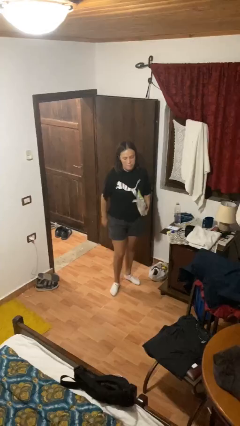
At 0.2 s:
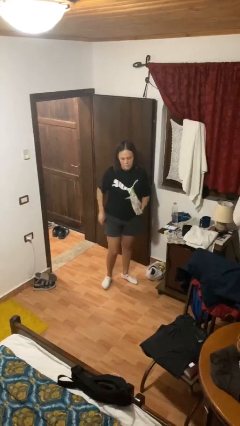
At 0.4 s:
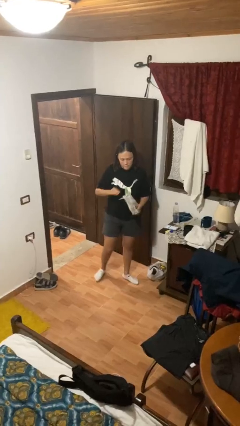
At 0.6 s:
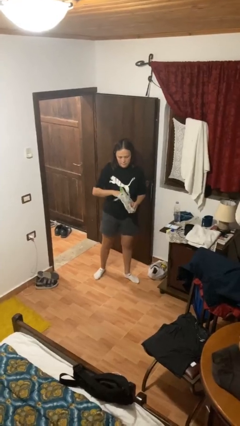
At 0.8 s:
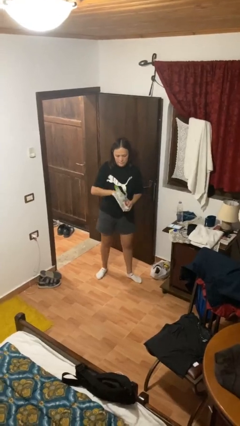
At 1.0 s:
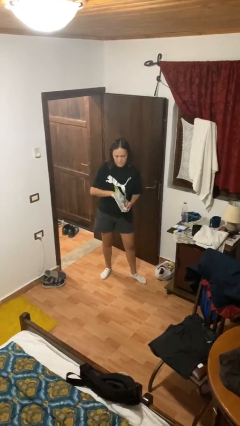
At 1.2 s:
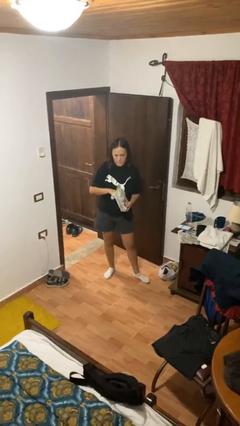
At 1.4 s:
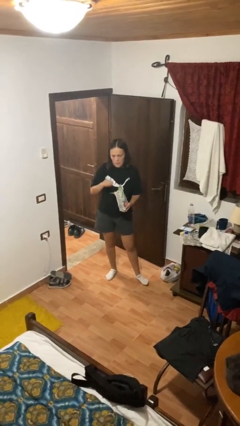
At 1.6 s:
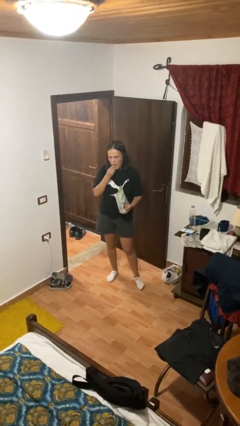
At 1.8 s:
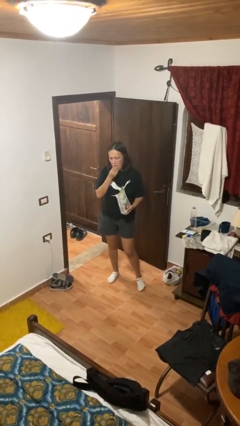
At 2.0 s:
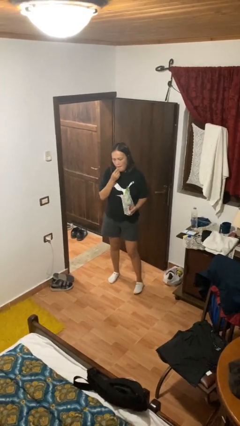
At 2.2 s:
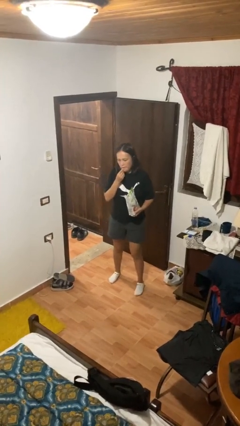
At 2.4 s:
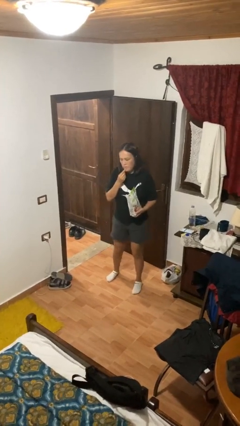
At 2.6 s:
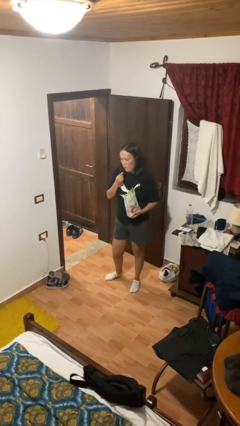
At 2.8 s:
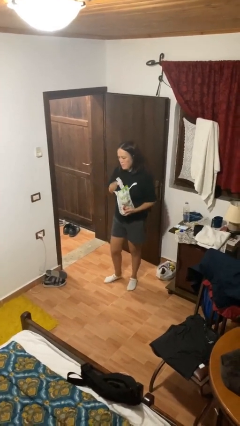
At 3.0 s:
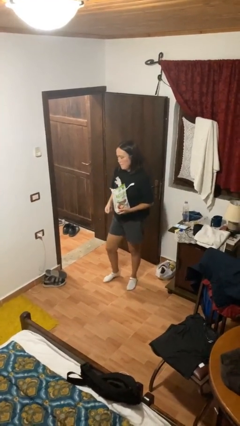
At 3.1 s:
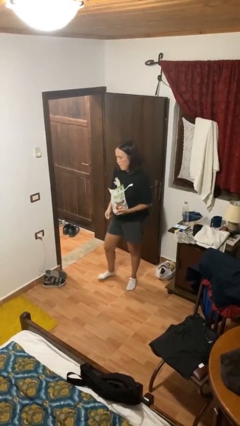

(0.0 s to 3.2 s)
person eats snack from bag

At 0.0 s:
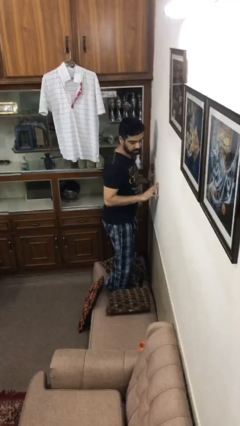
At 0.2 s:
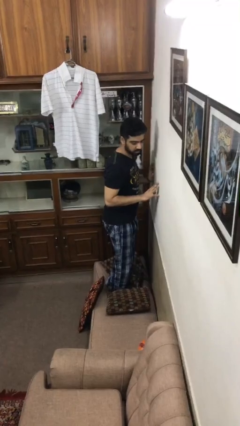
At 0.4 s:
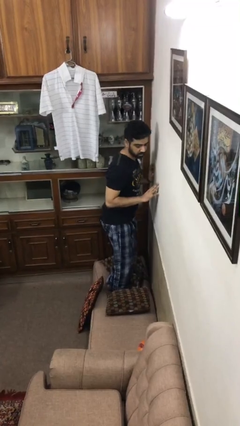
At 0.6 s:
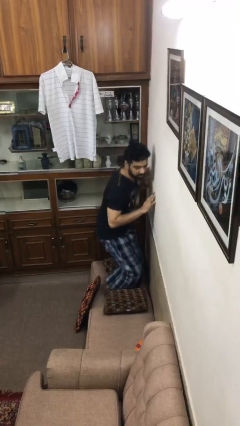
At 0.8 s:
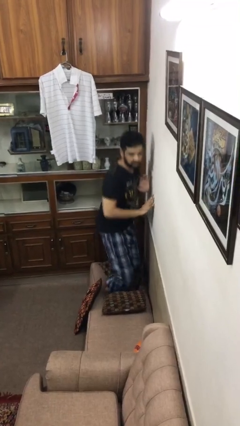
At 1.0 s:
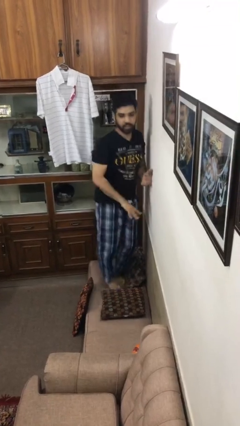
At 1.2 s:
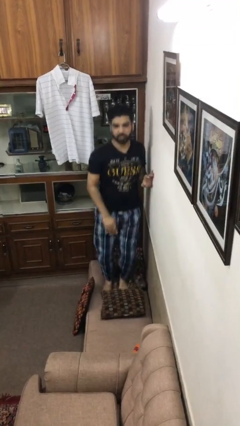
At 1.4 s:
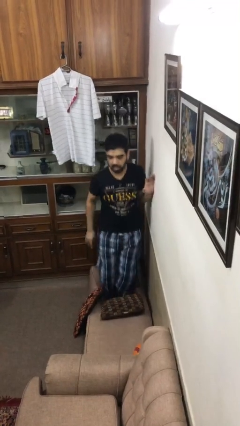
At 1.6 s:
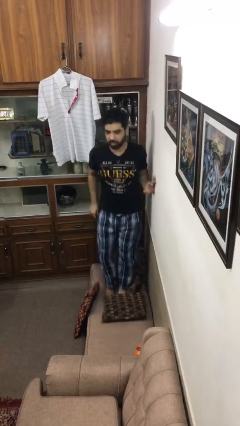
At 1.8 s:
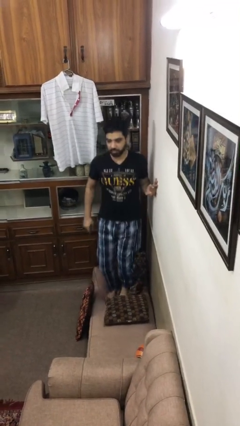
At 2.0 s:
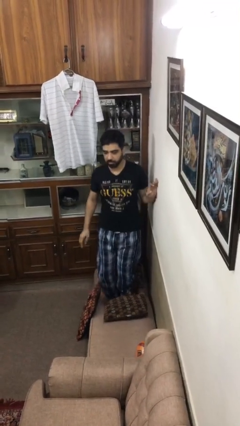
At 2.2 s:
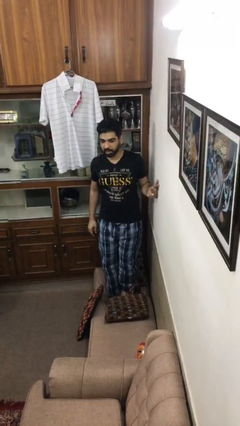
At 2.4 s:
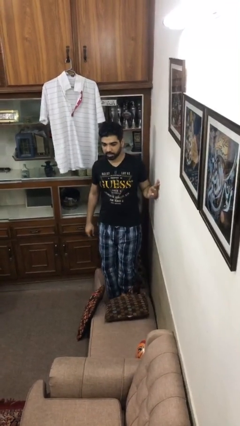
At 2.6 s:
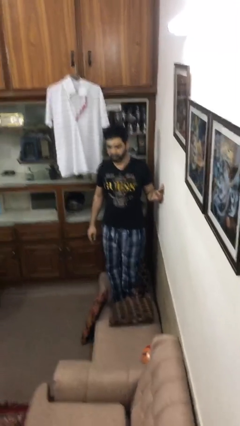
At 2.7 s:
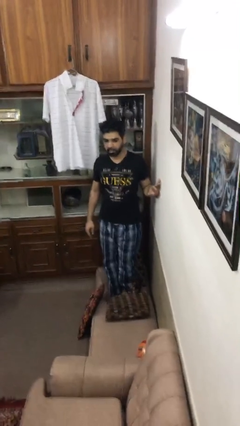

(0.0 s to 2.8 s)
person jumps on couch

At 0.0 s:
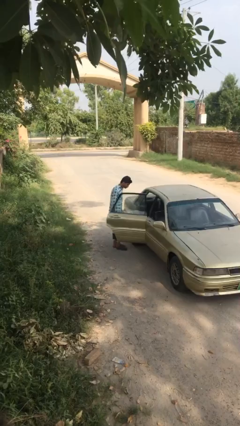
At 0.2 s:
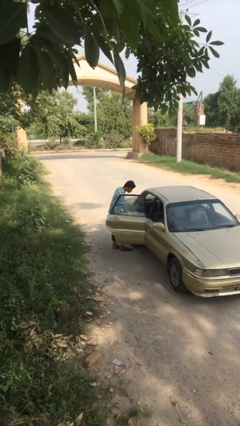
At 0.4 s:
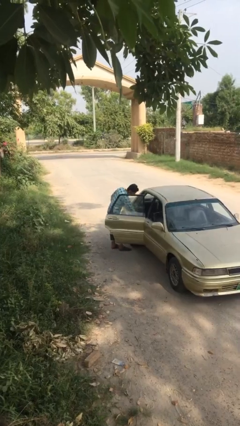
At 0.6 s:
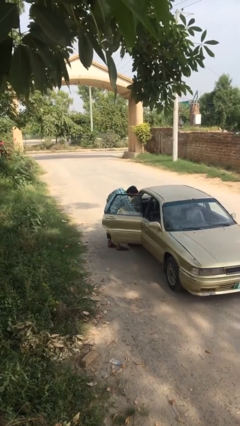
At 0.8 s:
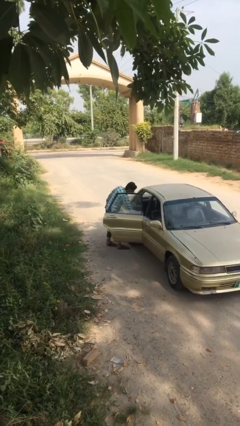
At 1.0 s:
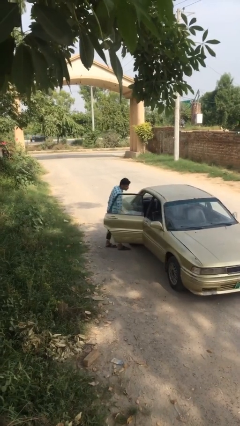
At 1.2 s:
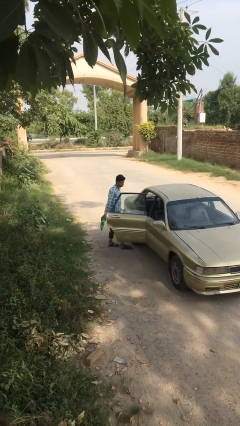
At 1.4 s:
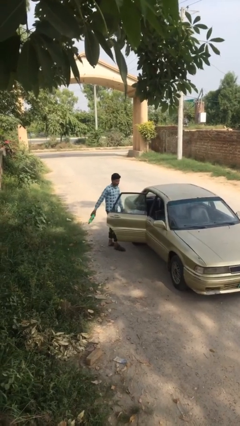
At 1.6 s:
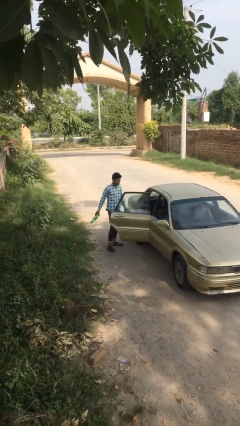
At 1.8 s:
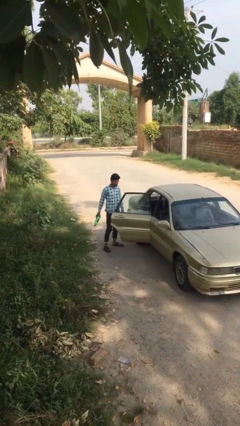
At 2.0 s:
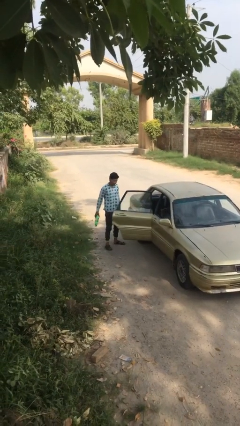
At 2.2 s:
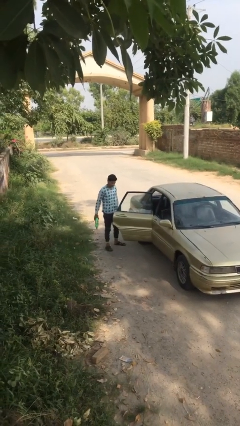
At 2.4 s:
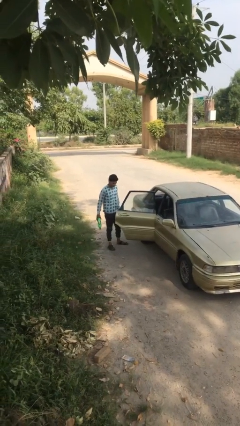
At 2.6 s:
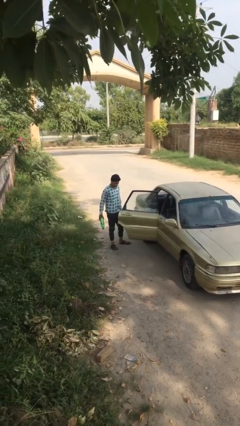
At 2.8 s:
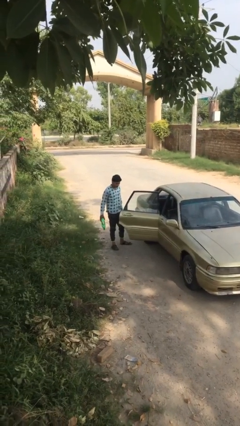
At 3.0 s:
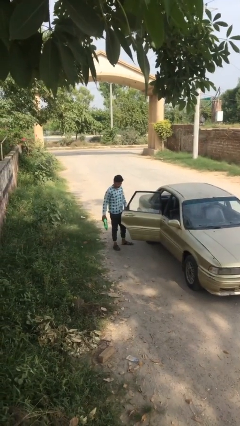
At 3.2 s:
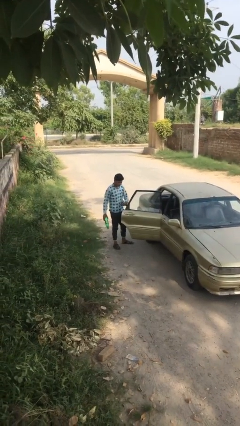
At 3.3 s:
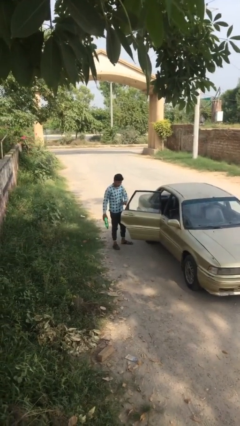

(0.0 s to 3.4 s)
person unloads car

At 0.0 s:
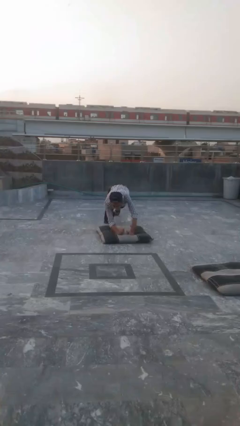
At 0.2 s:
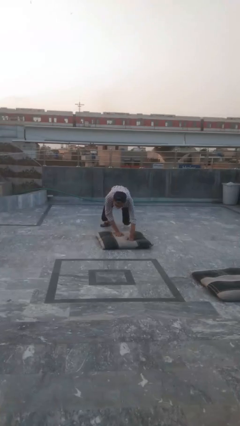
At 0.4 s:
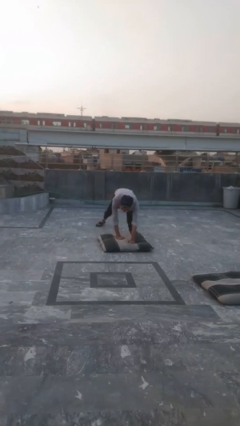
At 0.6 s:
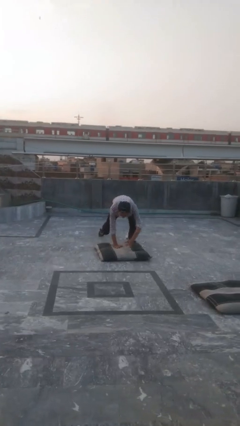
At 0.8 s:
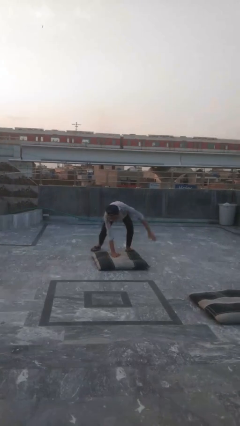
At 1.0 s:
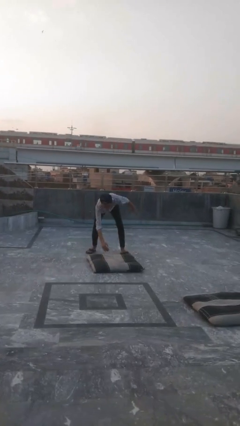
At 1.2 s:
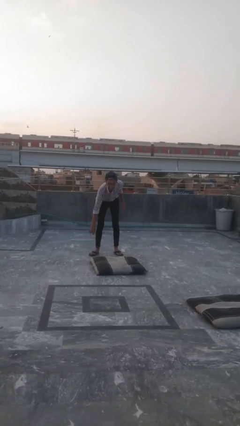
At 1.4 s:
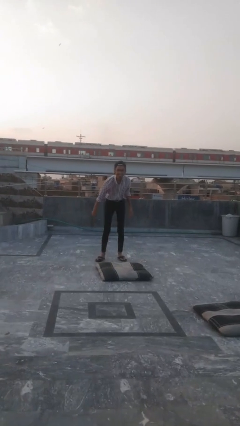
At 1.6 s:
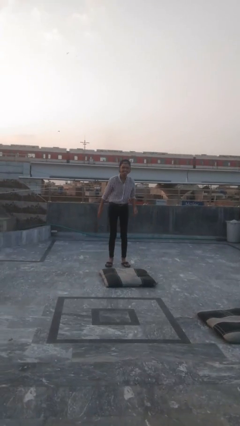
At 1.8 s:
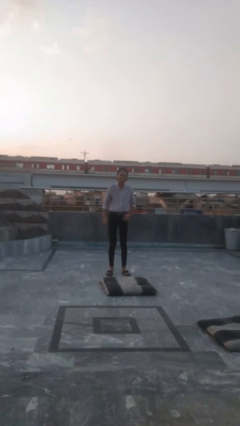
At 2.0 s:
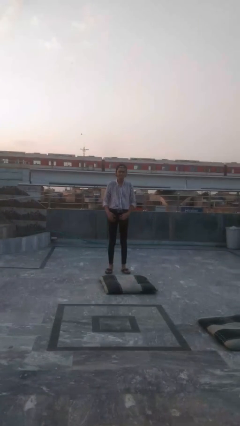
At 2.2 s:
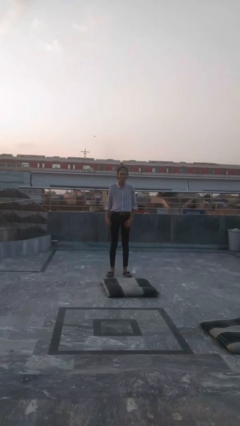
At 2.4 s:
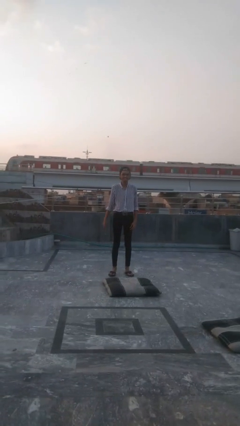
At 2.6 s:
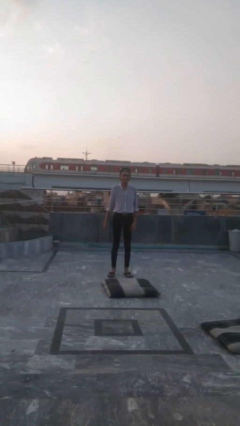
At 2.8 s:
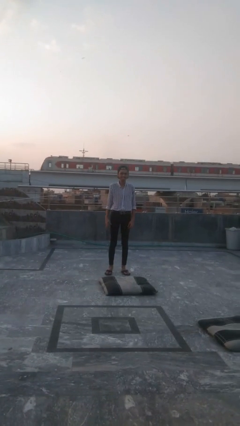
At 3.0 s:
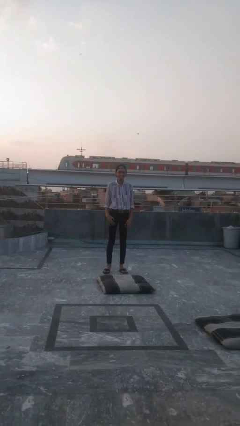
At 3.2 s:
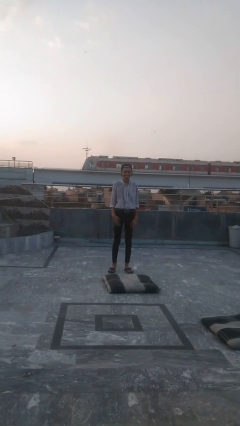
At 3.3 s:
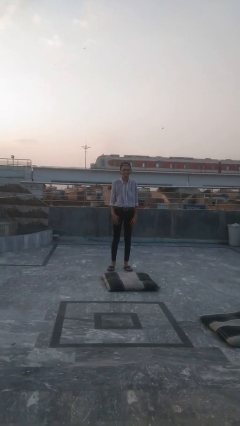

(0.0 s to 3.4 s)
person stands up from floor

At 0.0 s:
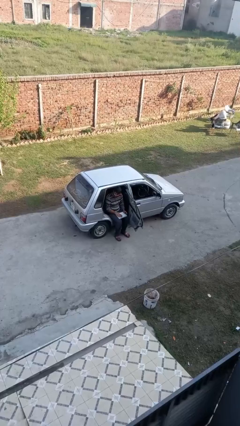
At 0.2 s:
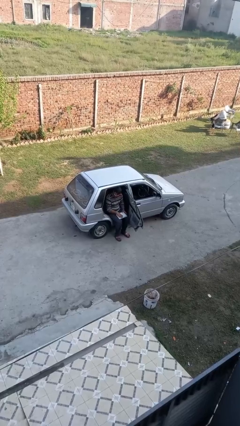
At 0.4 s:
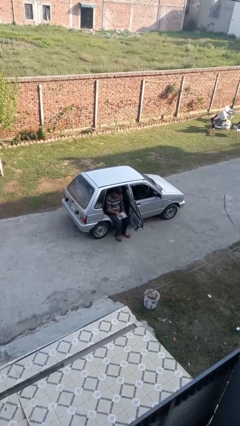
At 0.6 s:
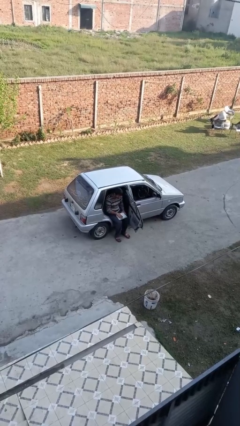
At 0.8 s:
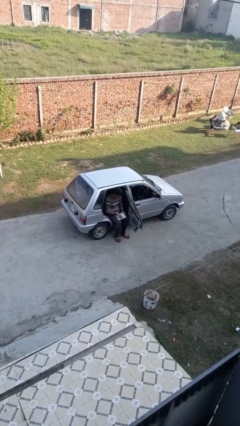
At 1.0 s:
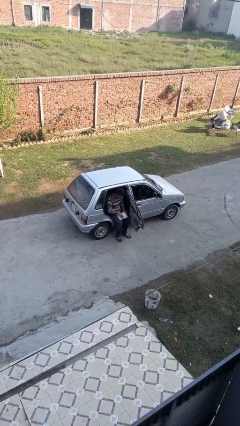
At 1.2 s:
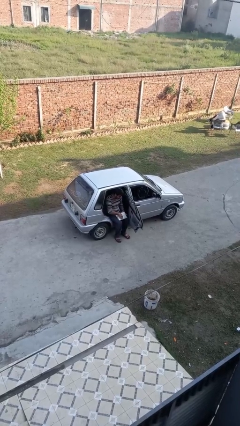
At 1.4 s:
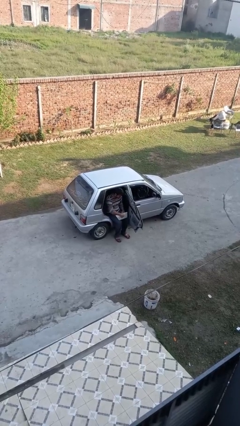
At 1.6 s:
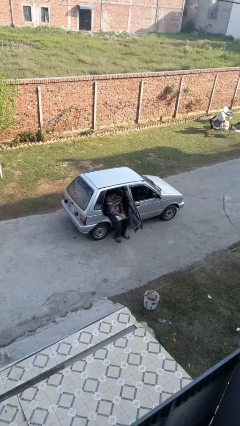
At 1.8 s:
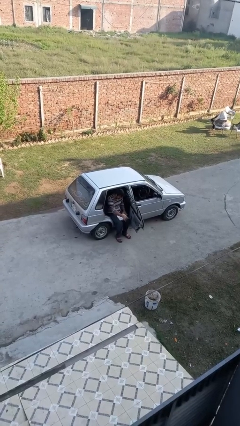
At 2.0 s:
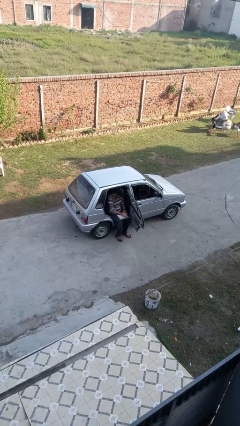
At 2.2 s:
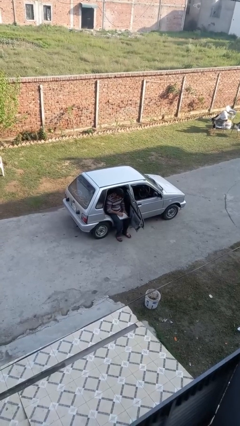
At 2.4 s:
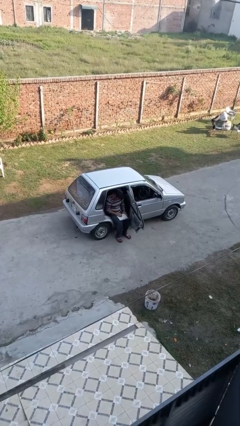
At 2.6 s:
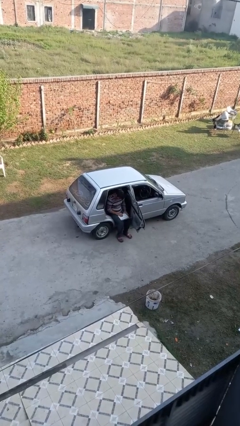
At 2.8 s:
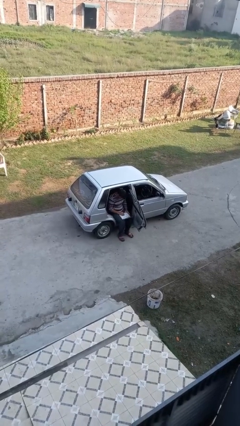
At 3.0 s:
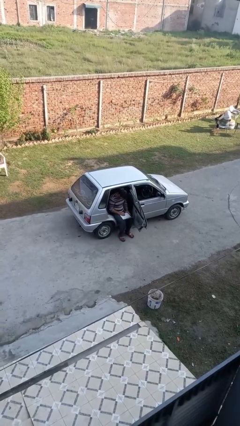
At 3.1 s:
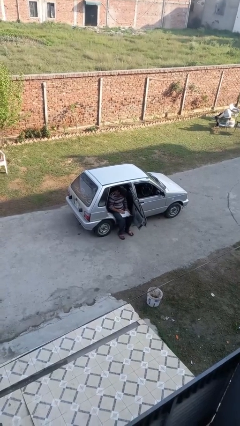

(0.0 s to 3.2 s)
person interacts with laptop

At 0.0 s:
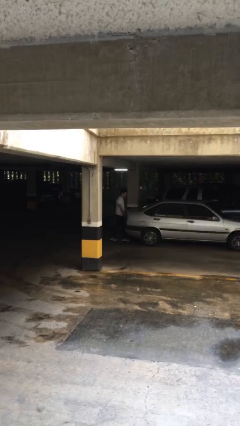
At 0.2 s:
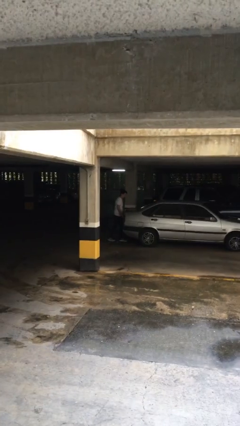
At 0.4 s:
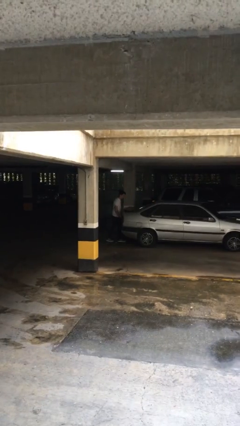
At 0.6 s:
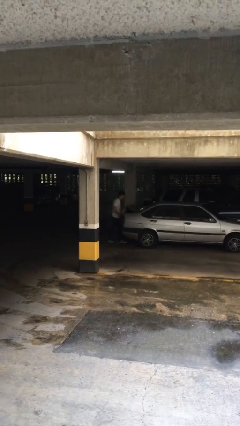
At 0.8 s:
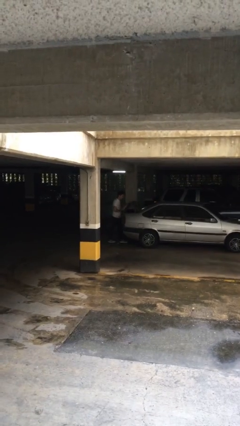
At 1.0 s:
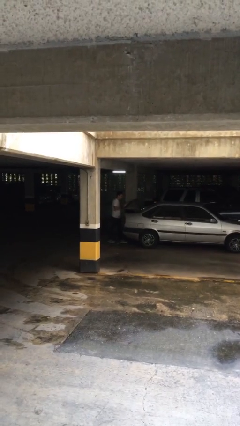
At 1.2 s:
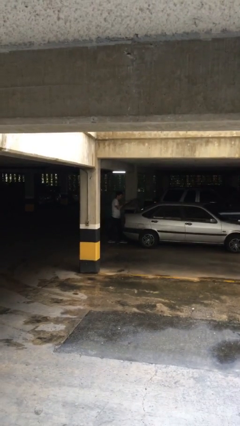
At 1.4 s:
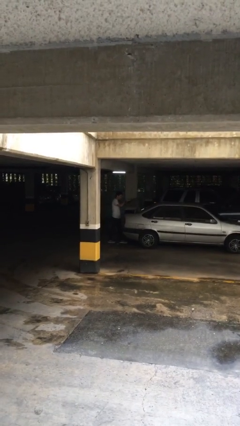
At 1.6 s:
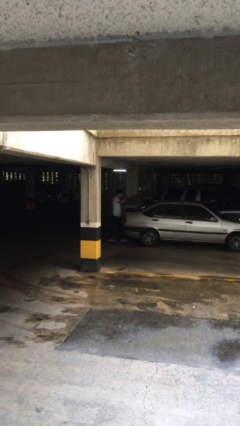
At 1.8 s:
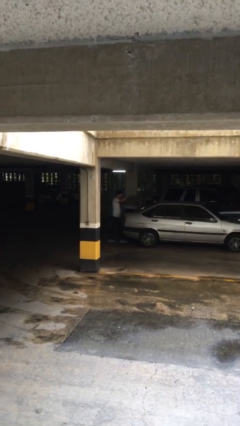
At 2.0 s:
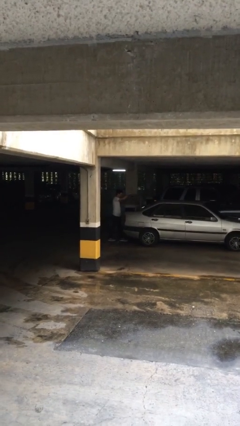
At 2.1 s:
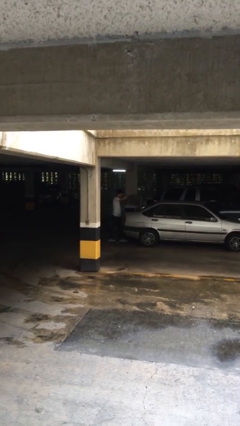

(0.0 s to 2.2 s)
person opens car trunk
